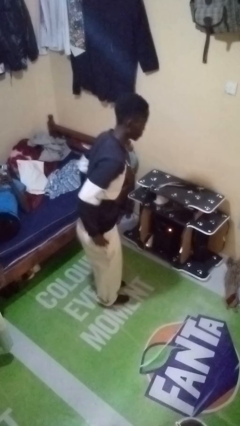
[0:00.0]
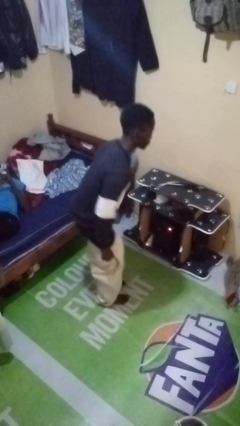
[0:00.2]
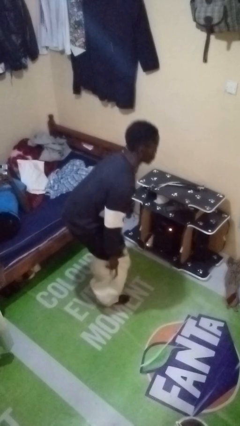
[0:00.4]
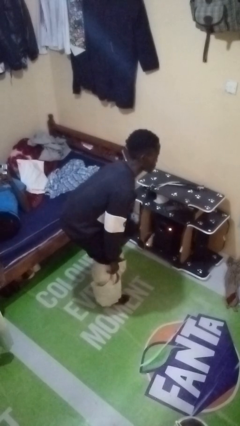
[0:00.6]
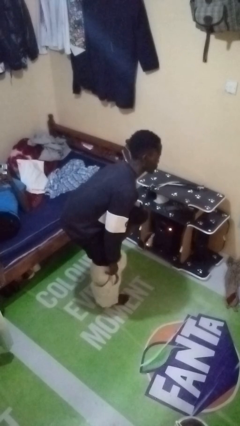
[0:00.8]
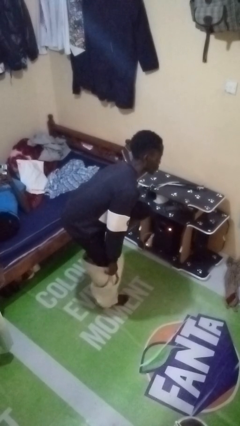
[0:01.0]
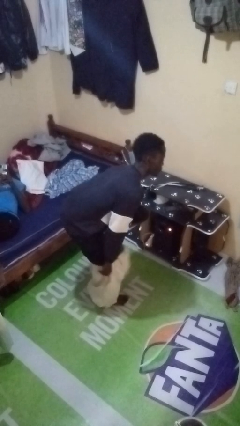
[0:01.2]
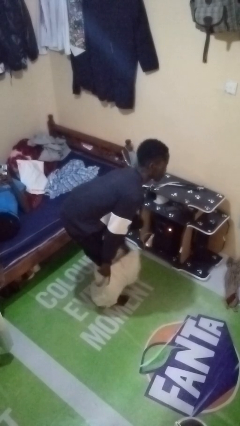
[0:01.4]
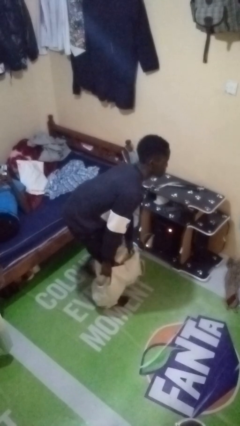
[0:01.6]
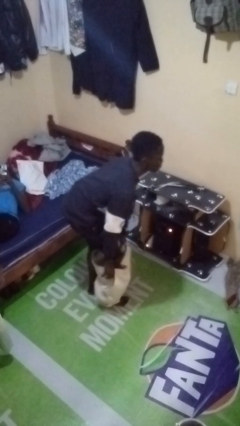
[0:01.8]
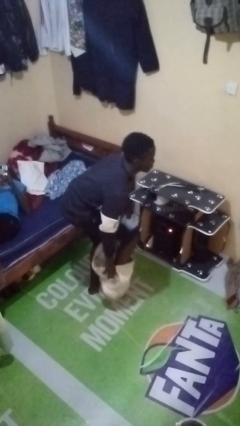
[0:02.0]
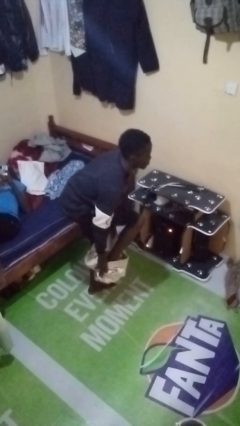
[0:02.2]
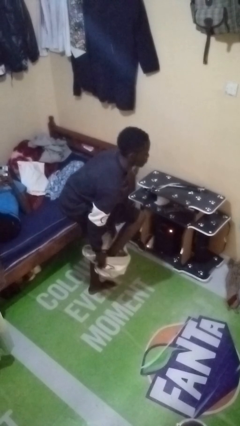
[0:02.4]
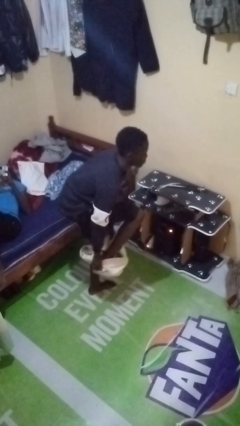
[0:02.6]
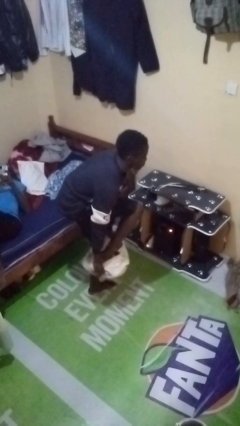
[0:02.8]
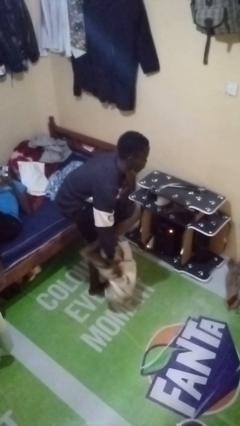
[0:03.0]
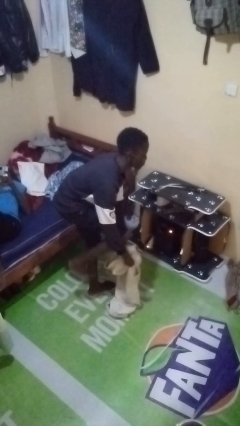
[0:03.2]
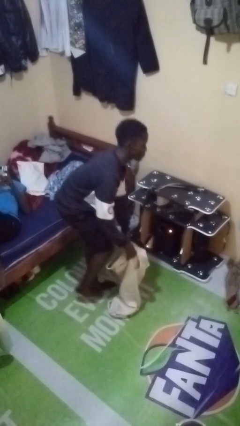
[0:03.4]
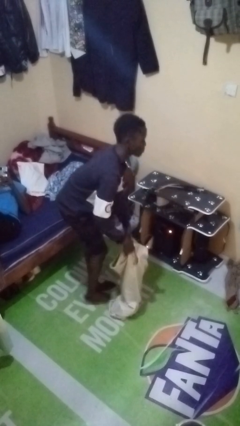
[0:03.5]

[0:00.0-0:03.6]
person takes off pants

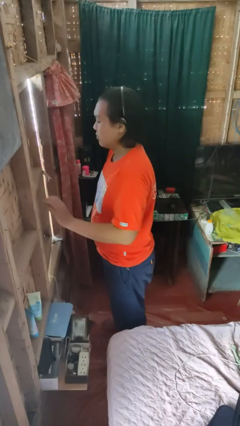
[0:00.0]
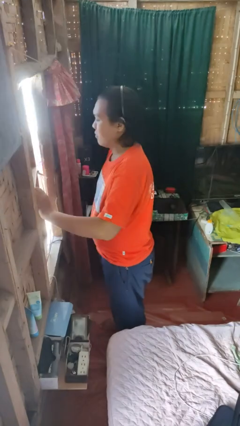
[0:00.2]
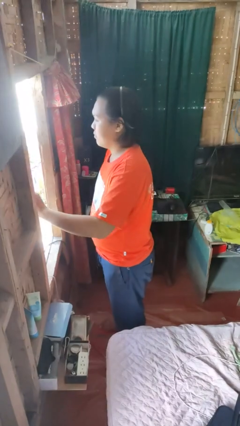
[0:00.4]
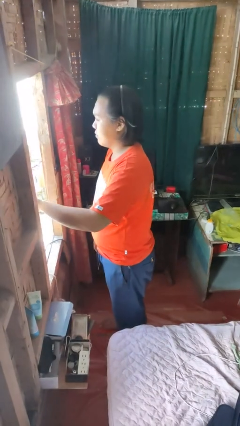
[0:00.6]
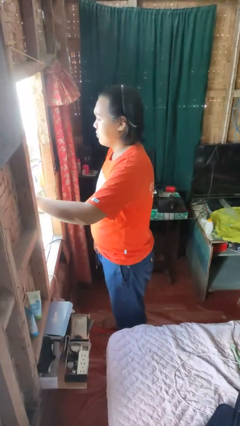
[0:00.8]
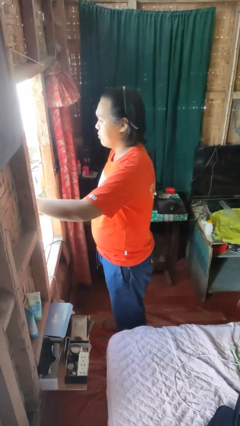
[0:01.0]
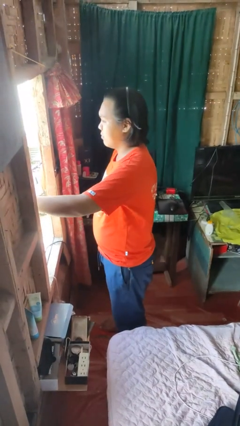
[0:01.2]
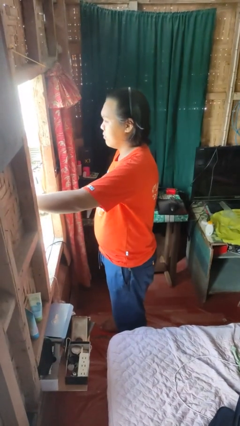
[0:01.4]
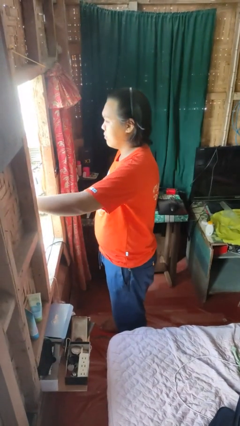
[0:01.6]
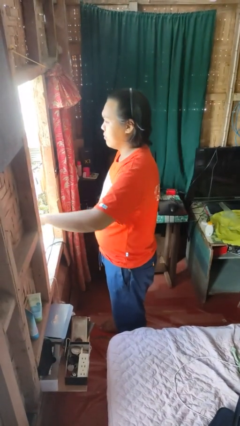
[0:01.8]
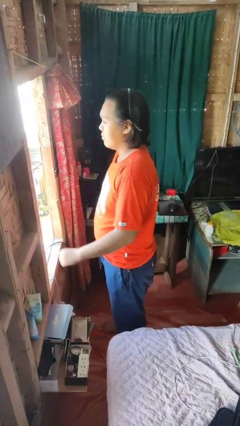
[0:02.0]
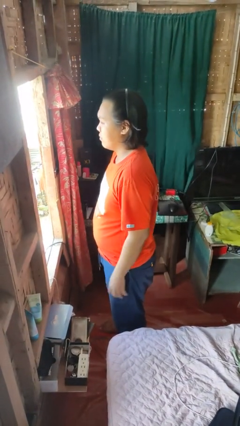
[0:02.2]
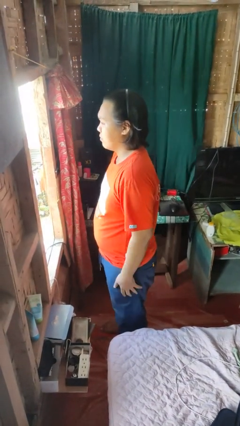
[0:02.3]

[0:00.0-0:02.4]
person opens home window

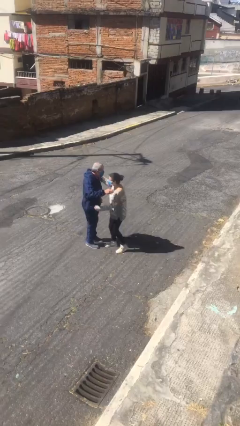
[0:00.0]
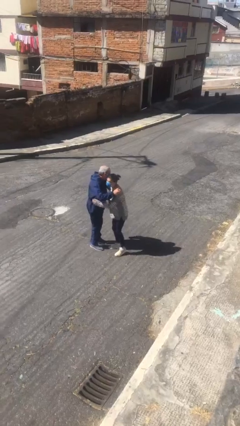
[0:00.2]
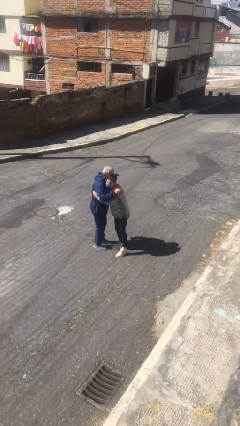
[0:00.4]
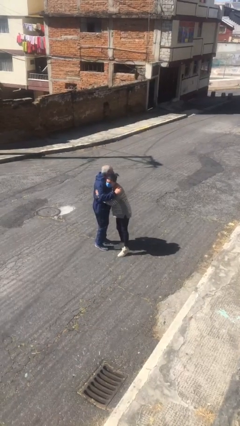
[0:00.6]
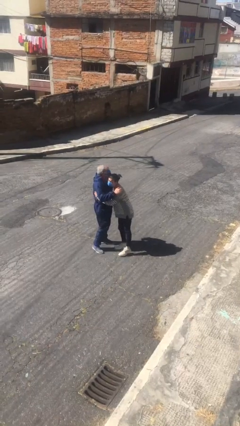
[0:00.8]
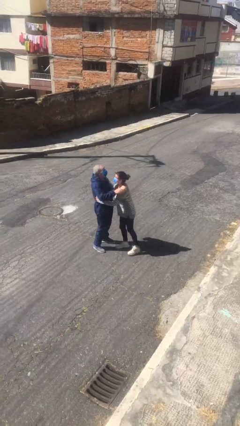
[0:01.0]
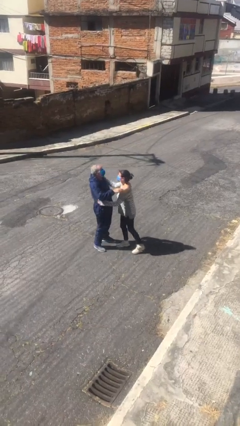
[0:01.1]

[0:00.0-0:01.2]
person embraces person

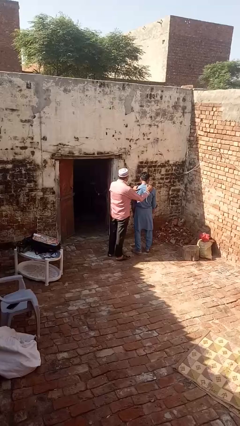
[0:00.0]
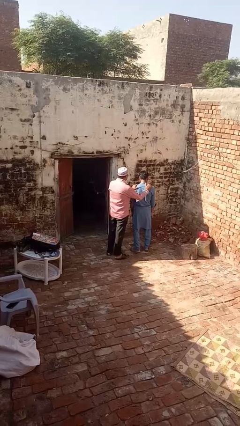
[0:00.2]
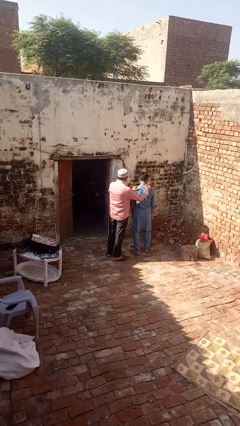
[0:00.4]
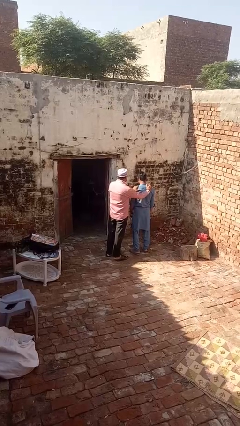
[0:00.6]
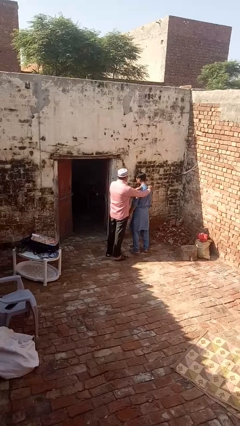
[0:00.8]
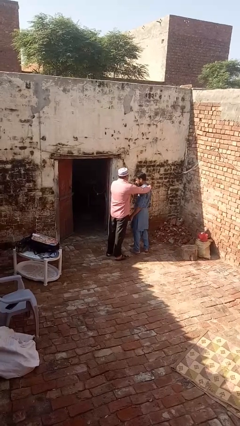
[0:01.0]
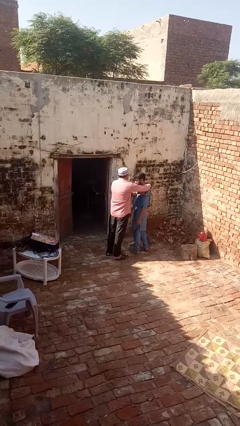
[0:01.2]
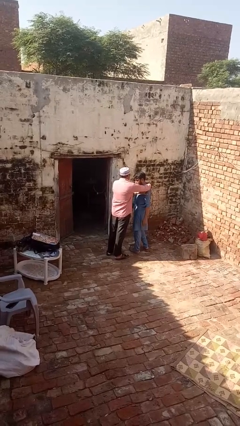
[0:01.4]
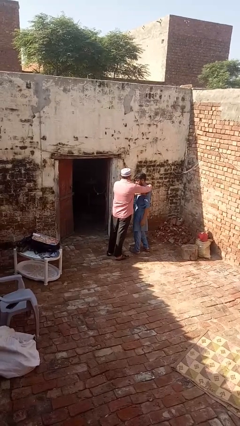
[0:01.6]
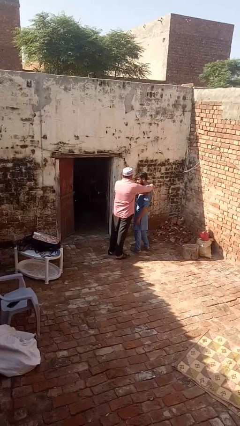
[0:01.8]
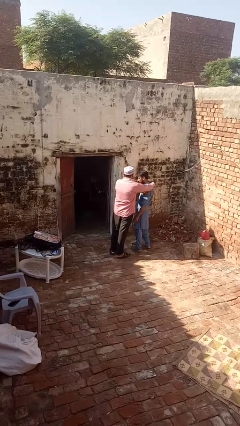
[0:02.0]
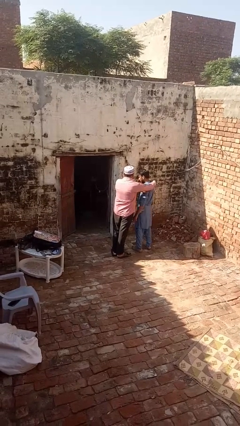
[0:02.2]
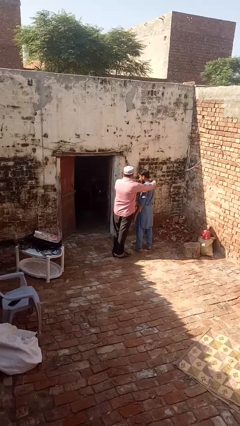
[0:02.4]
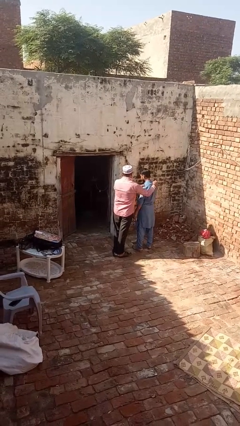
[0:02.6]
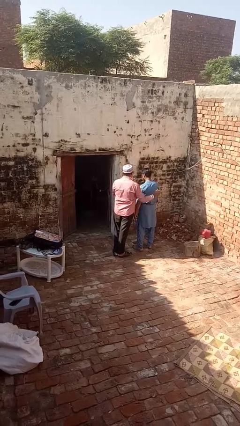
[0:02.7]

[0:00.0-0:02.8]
person spins person around

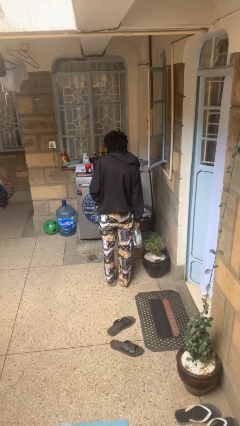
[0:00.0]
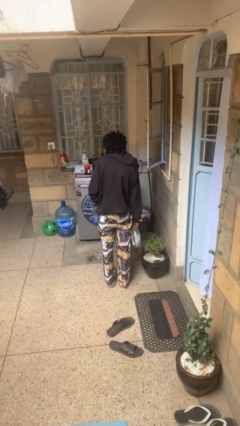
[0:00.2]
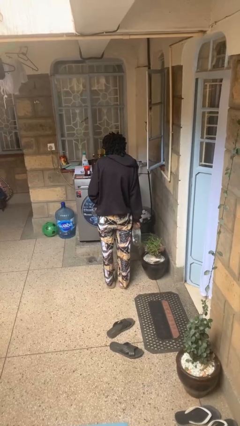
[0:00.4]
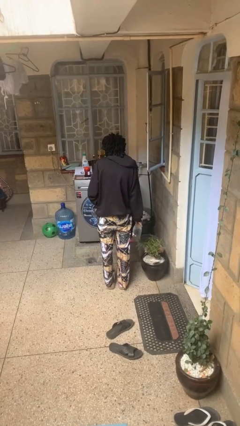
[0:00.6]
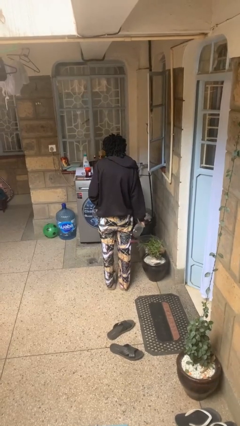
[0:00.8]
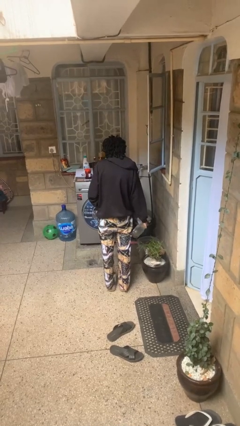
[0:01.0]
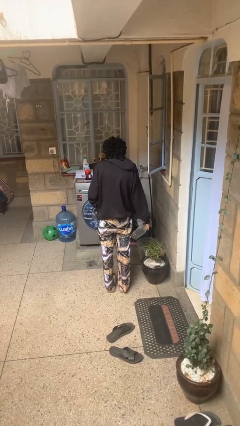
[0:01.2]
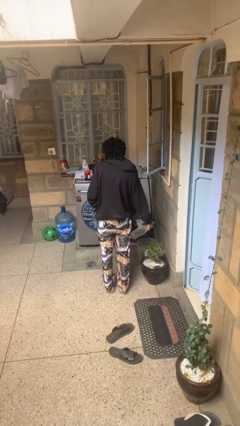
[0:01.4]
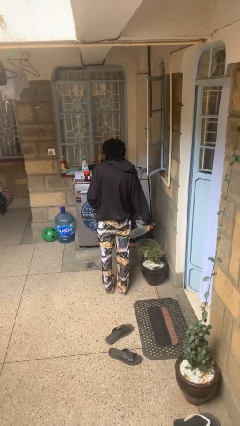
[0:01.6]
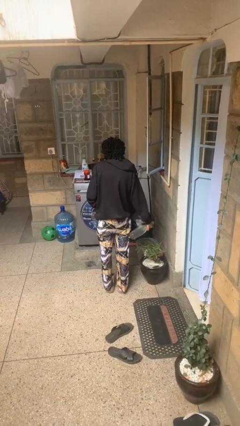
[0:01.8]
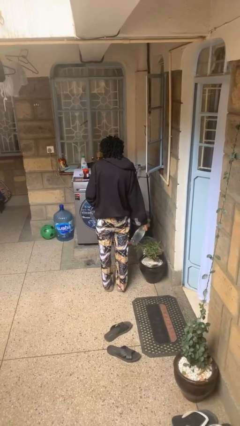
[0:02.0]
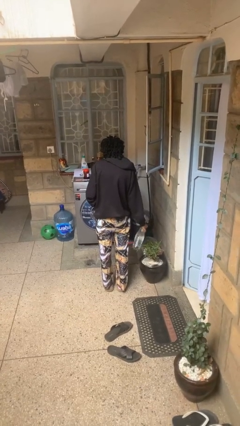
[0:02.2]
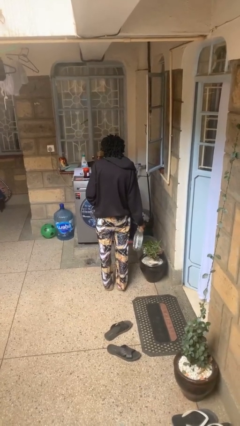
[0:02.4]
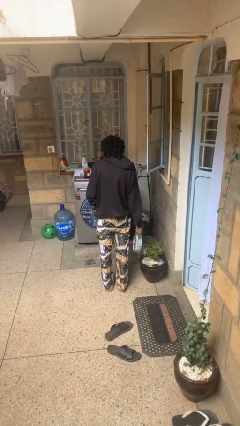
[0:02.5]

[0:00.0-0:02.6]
person waters houseplant

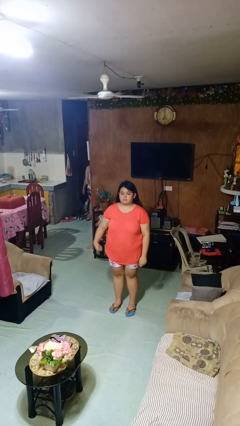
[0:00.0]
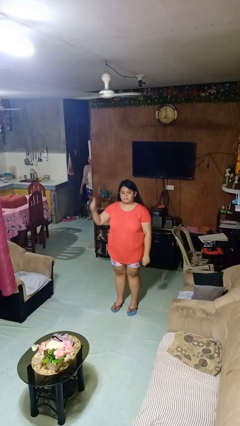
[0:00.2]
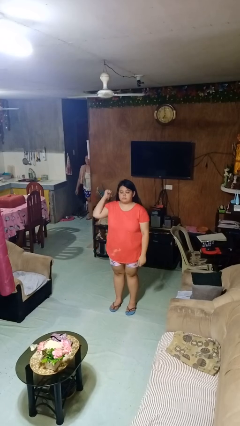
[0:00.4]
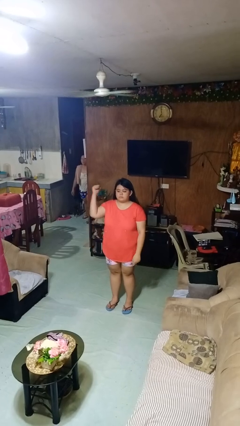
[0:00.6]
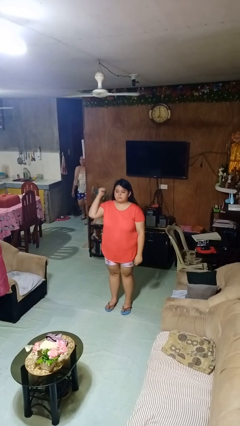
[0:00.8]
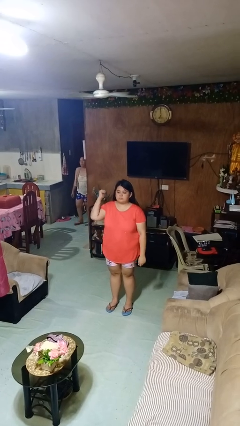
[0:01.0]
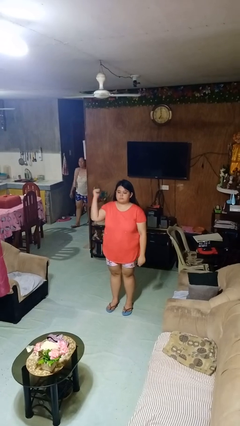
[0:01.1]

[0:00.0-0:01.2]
person gestures behind me

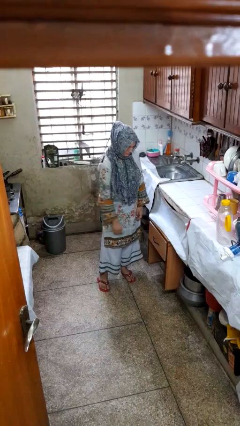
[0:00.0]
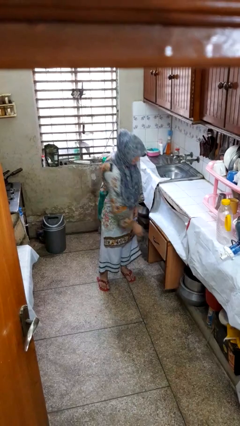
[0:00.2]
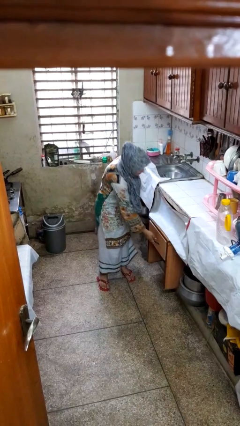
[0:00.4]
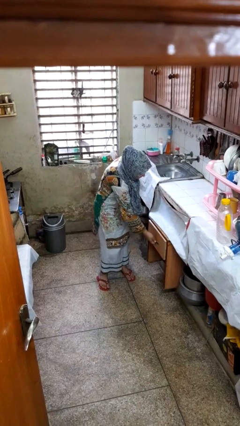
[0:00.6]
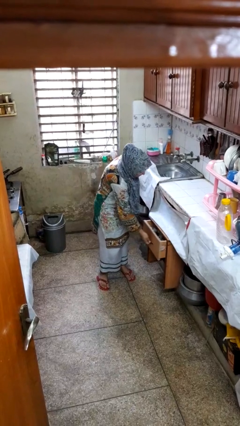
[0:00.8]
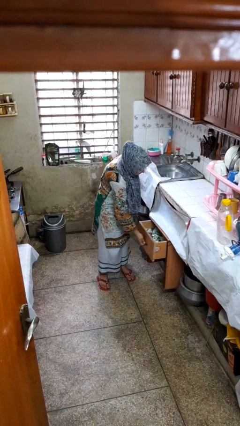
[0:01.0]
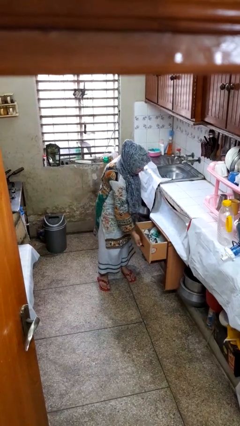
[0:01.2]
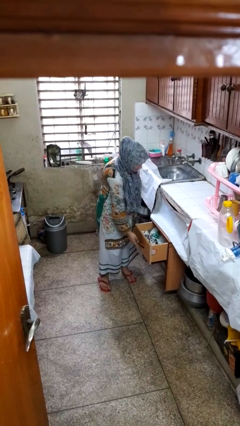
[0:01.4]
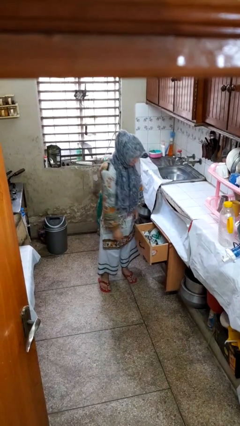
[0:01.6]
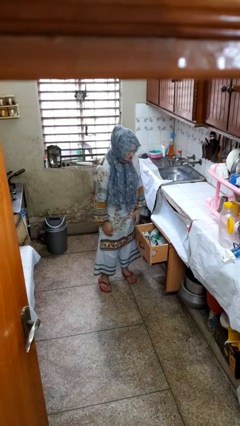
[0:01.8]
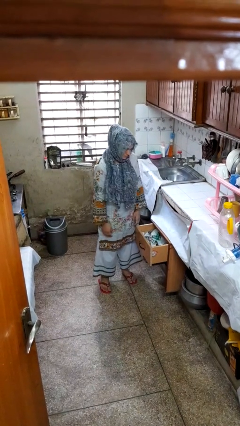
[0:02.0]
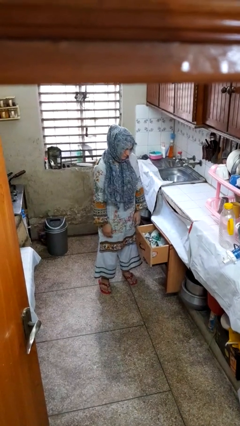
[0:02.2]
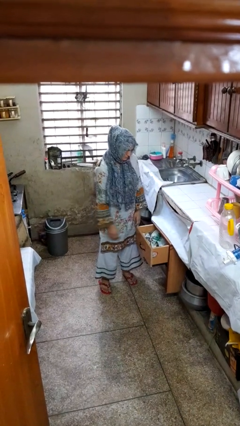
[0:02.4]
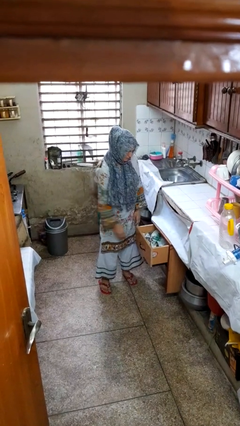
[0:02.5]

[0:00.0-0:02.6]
person opens kitchen drawer

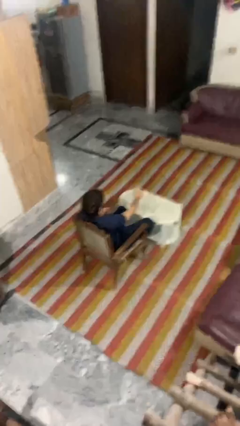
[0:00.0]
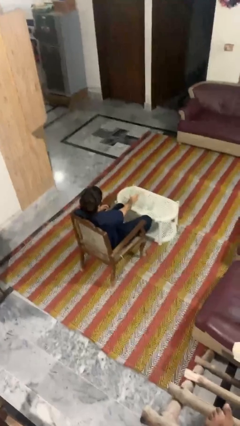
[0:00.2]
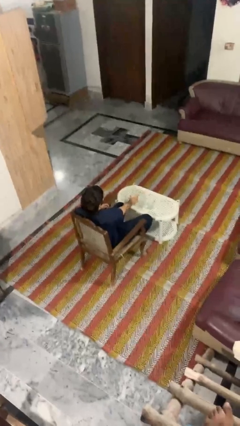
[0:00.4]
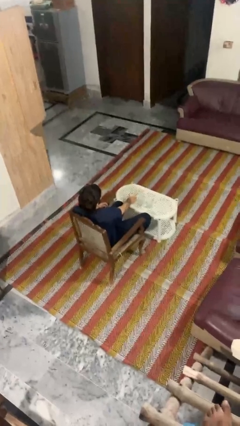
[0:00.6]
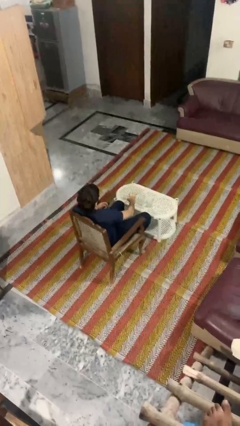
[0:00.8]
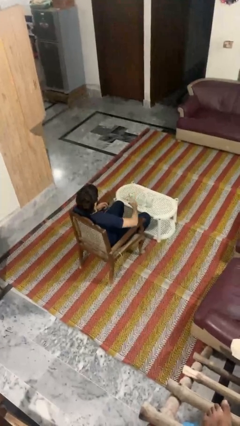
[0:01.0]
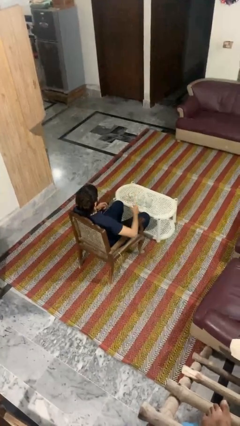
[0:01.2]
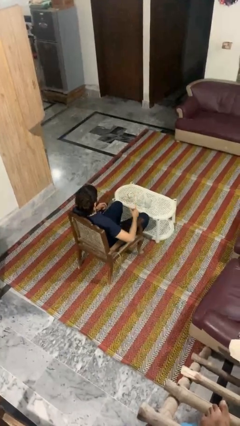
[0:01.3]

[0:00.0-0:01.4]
person puts down object on table
